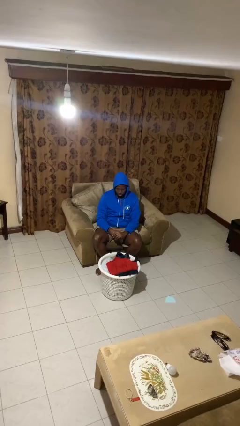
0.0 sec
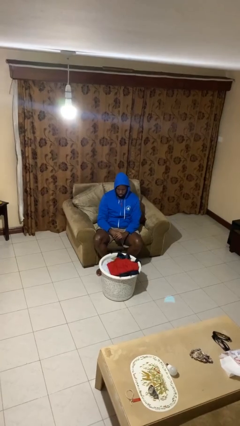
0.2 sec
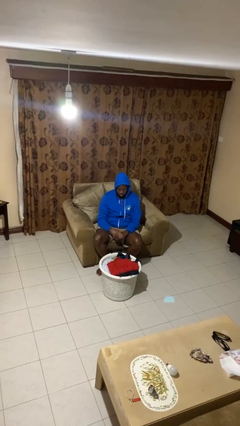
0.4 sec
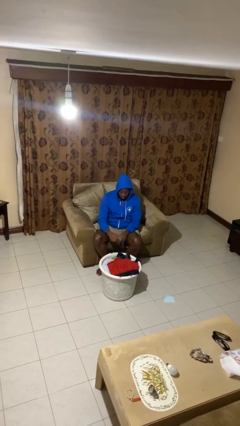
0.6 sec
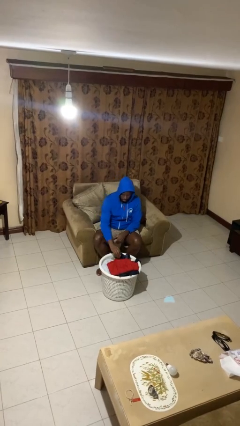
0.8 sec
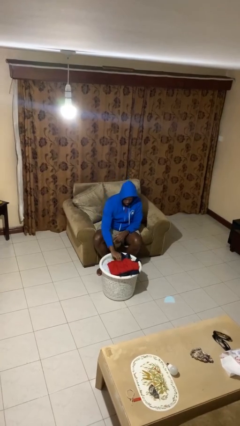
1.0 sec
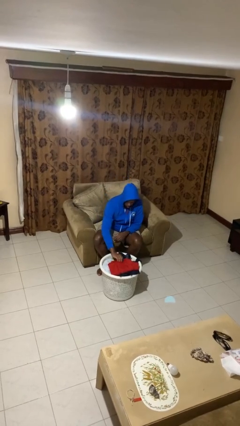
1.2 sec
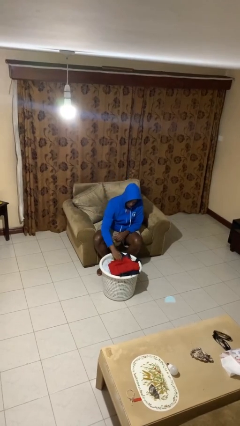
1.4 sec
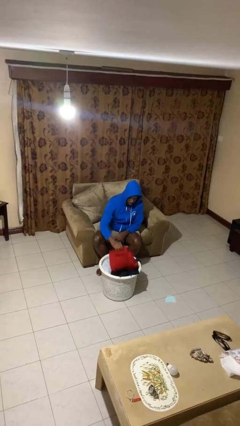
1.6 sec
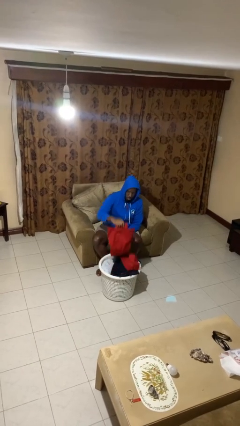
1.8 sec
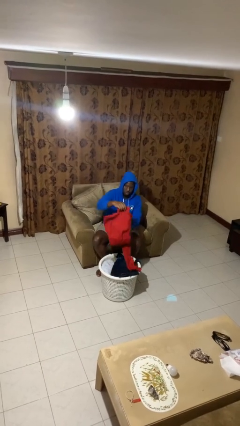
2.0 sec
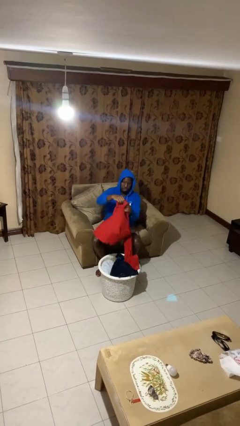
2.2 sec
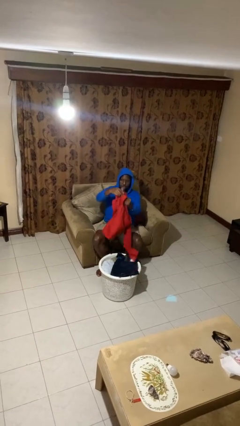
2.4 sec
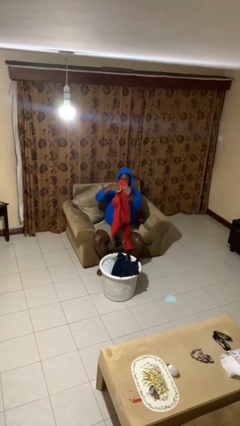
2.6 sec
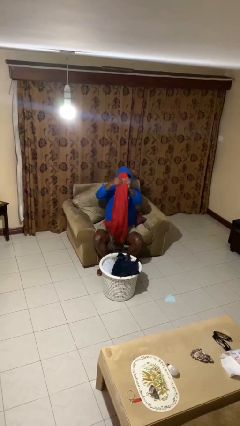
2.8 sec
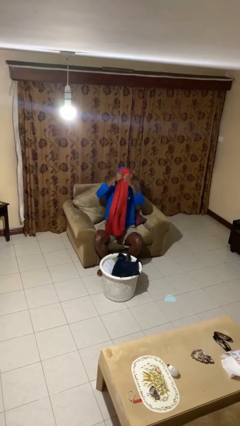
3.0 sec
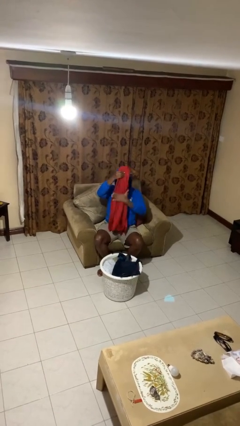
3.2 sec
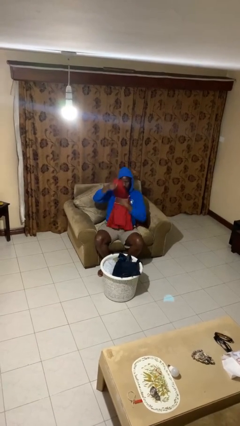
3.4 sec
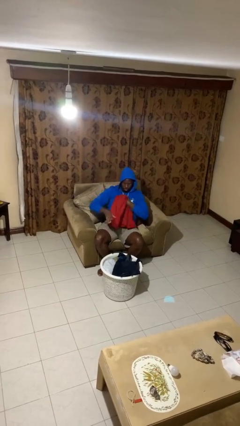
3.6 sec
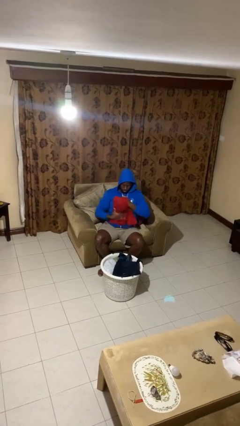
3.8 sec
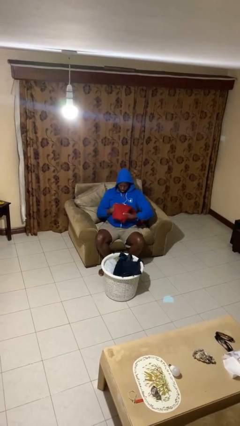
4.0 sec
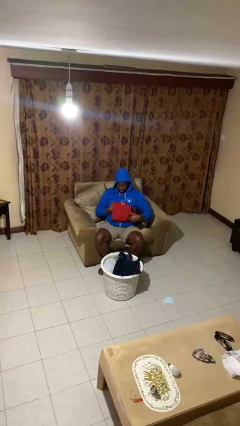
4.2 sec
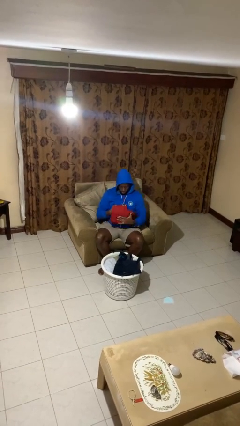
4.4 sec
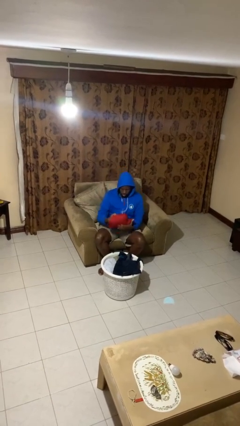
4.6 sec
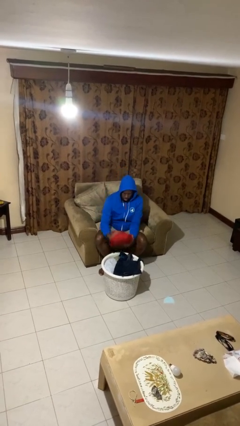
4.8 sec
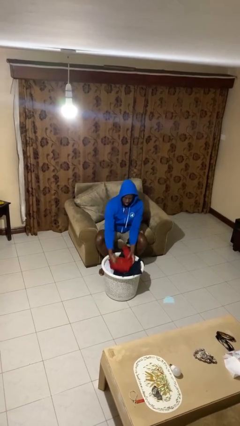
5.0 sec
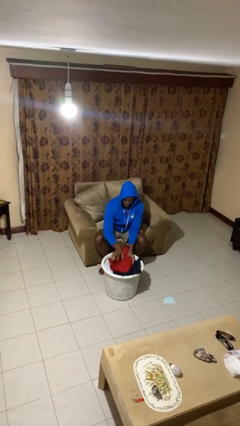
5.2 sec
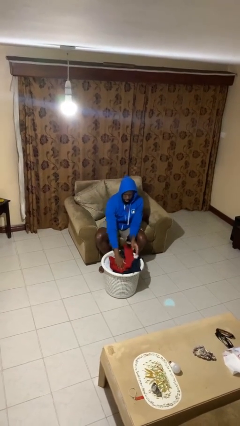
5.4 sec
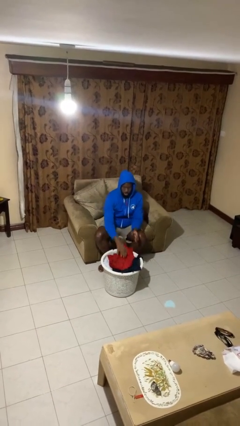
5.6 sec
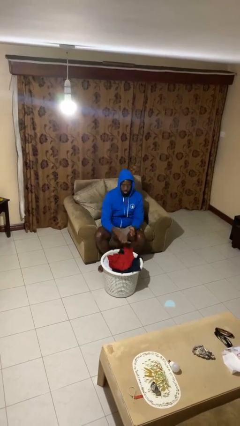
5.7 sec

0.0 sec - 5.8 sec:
person folds shirt

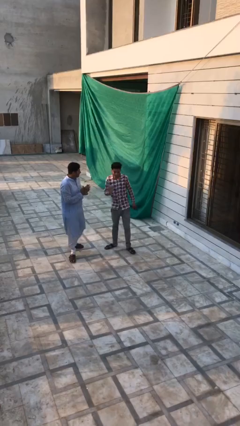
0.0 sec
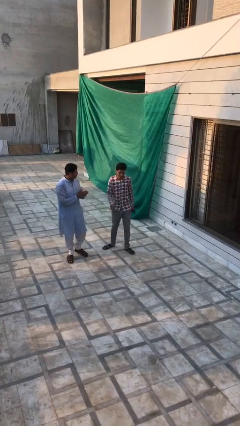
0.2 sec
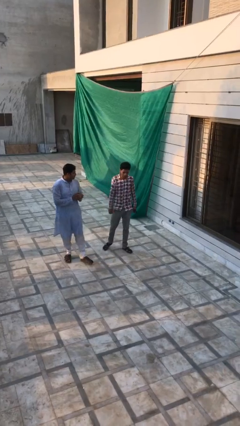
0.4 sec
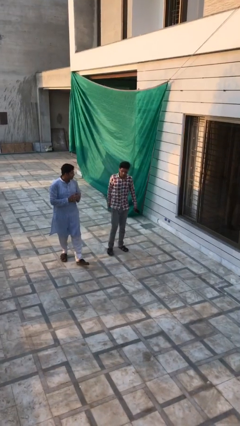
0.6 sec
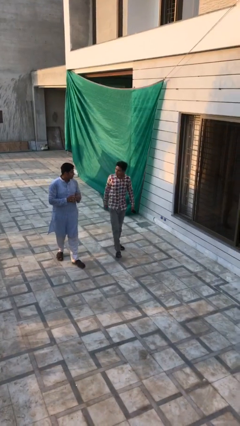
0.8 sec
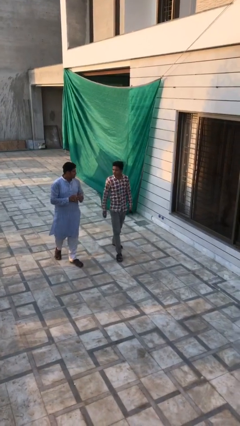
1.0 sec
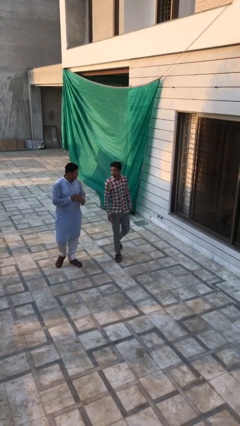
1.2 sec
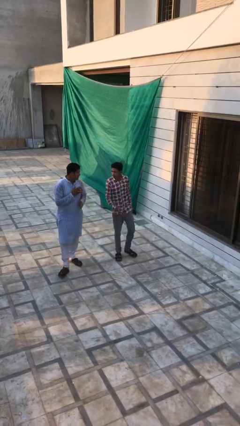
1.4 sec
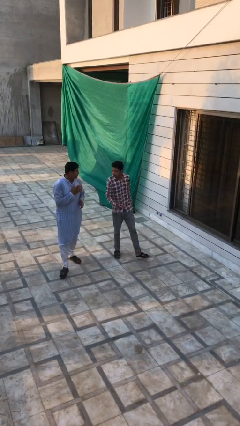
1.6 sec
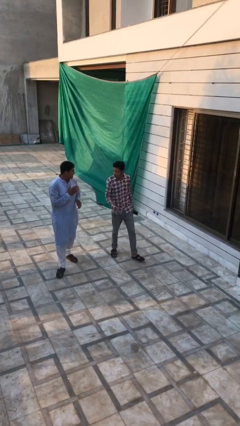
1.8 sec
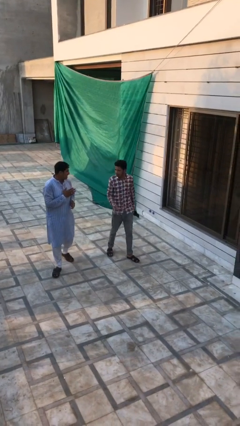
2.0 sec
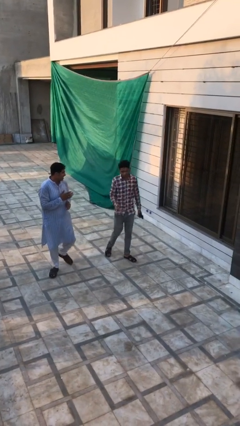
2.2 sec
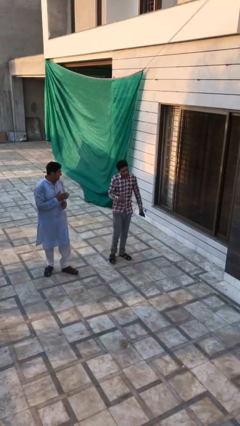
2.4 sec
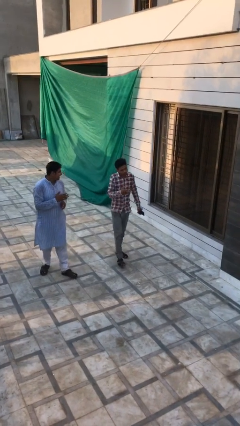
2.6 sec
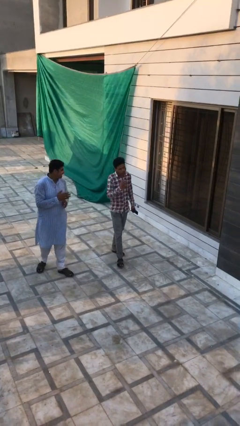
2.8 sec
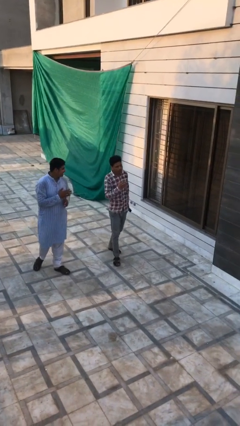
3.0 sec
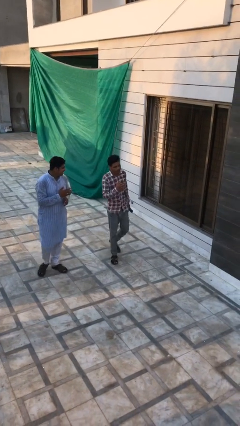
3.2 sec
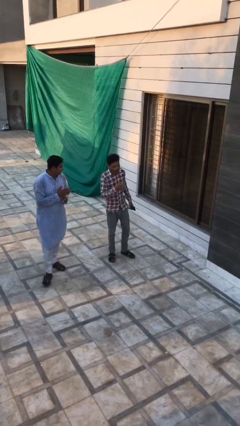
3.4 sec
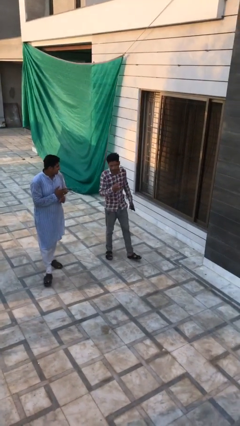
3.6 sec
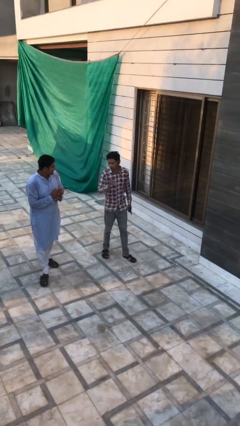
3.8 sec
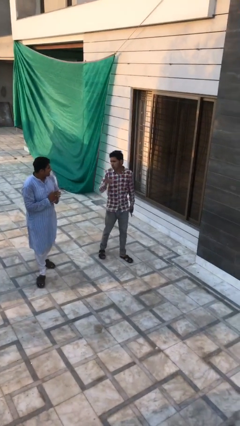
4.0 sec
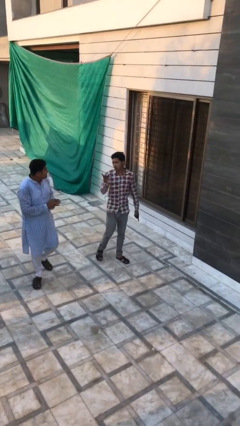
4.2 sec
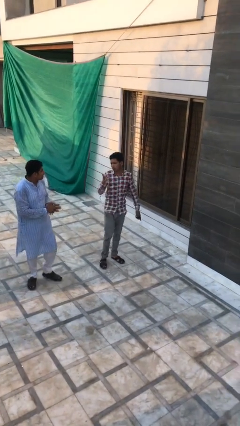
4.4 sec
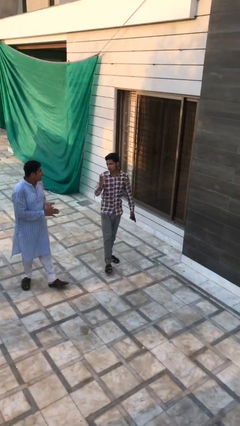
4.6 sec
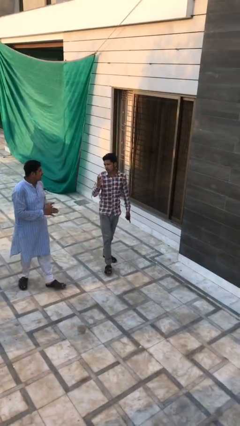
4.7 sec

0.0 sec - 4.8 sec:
person talks to person

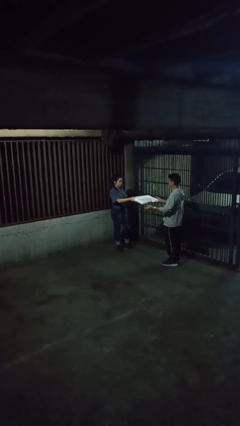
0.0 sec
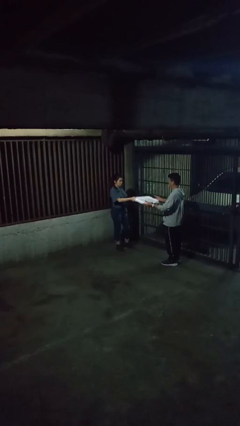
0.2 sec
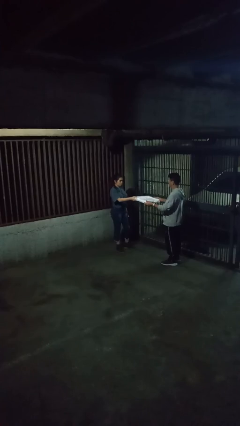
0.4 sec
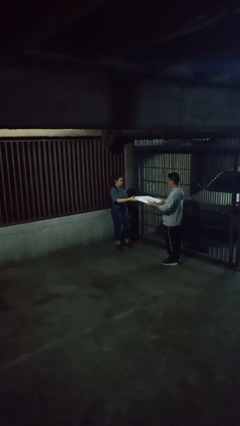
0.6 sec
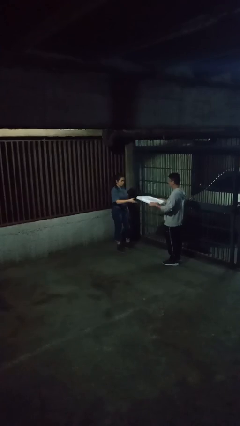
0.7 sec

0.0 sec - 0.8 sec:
person transfers object to person

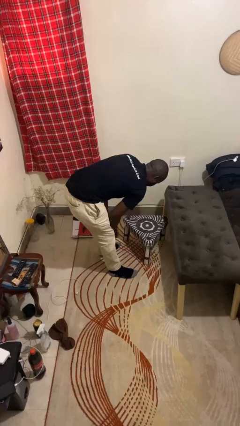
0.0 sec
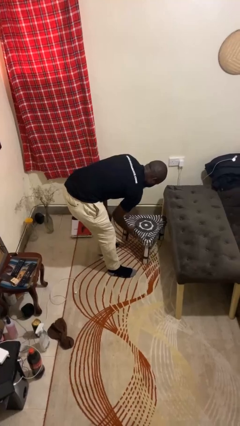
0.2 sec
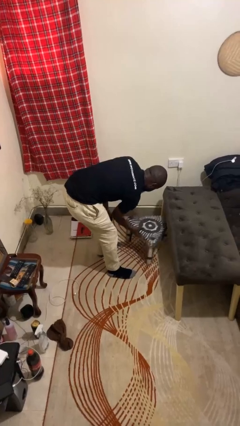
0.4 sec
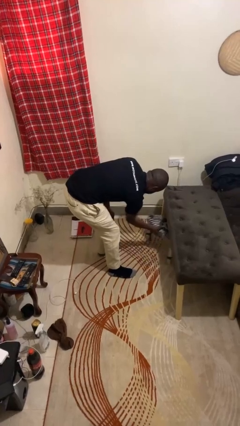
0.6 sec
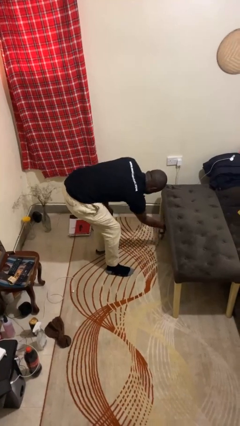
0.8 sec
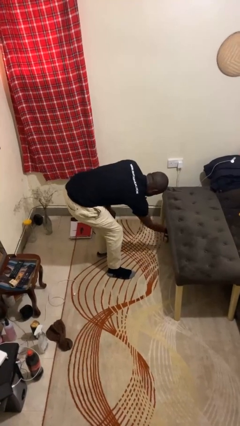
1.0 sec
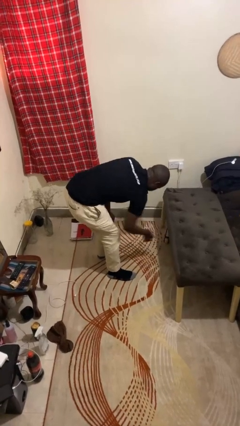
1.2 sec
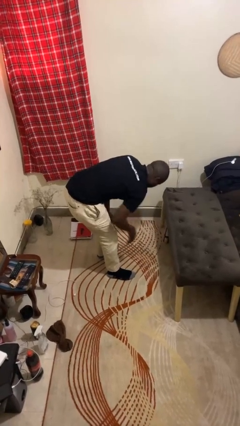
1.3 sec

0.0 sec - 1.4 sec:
person pushes in chair

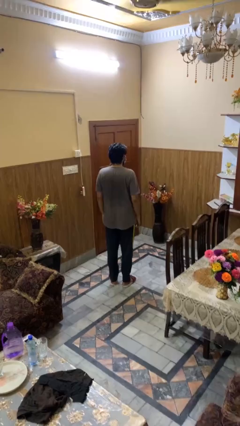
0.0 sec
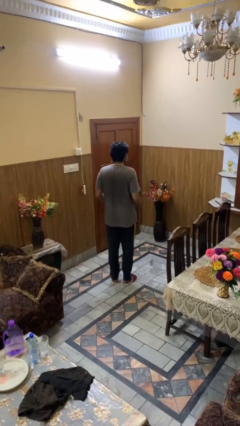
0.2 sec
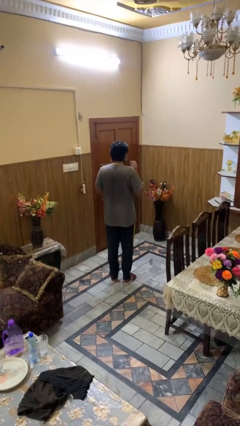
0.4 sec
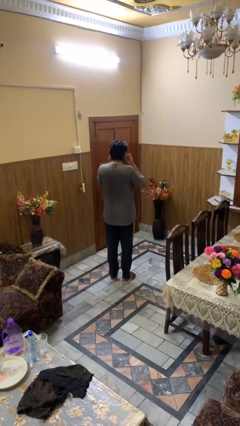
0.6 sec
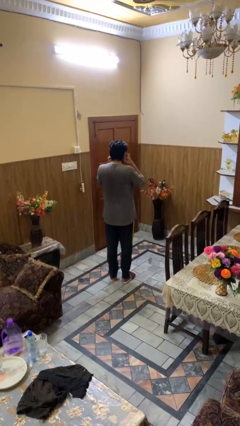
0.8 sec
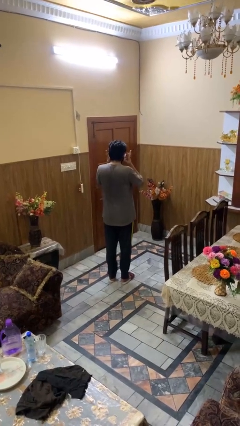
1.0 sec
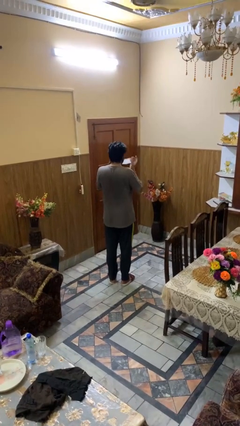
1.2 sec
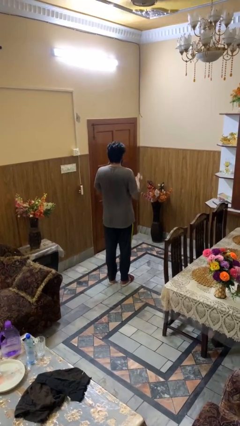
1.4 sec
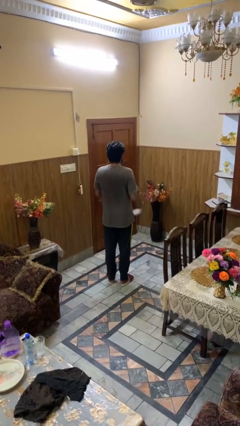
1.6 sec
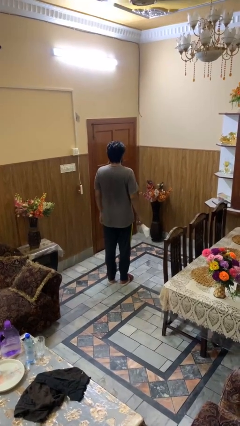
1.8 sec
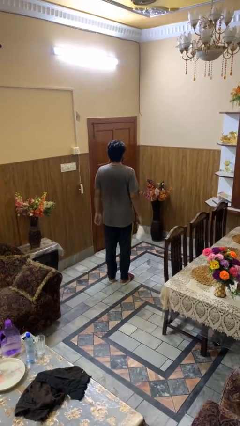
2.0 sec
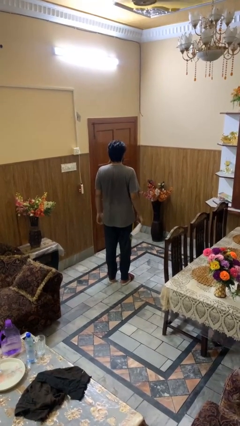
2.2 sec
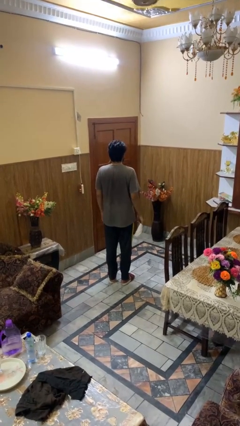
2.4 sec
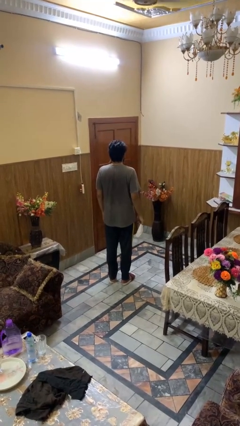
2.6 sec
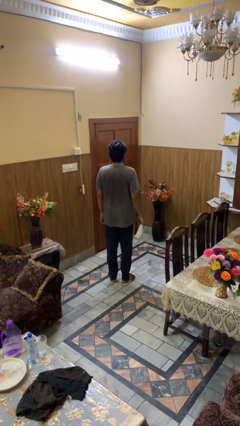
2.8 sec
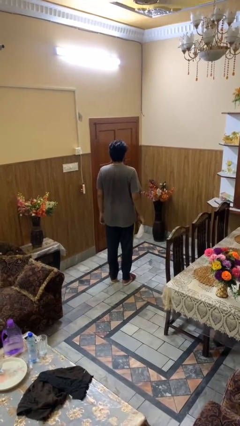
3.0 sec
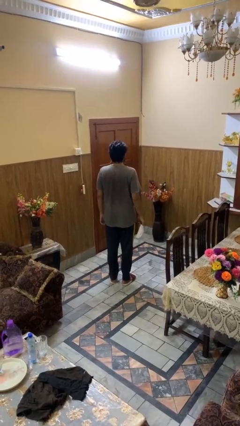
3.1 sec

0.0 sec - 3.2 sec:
person takes off facemask

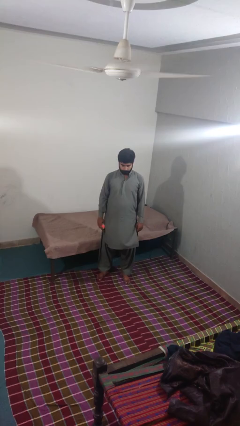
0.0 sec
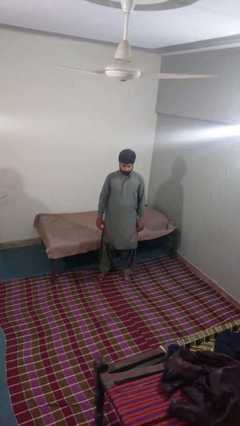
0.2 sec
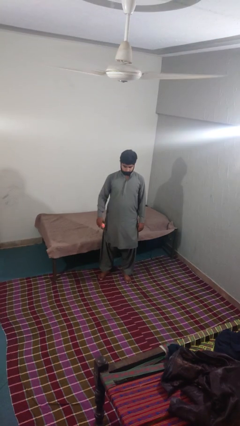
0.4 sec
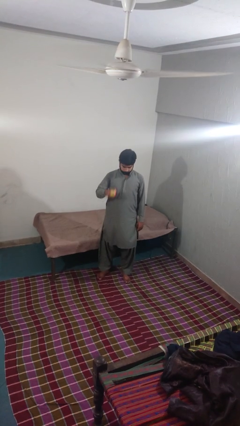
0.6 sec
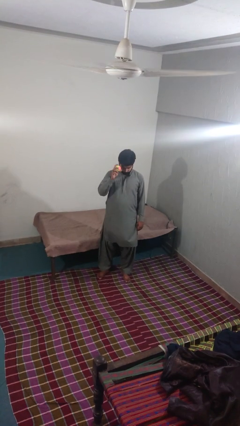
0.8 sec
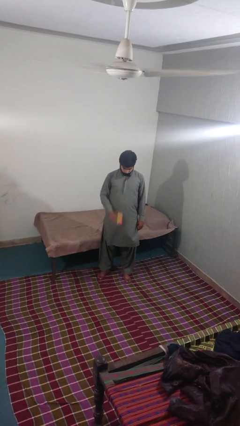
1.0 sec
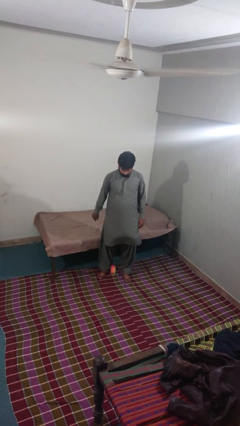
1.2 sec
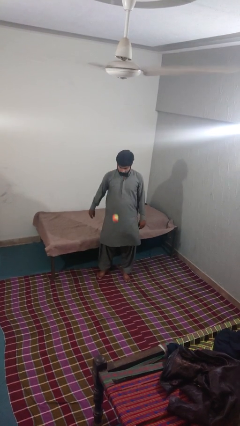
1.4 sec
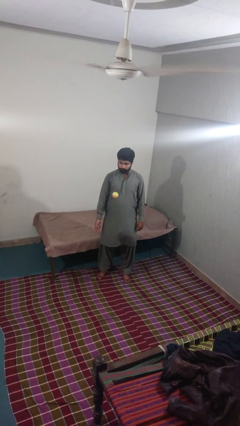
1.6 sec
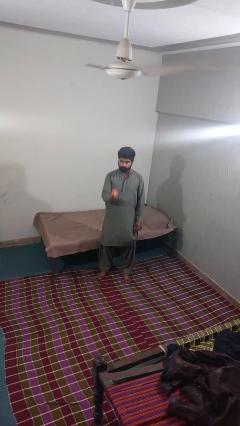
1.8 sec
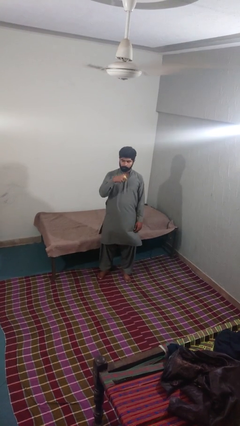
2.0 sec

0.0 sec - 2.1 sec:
person bounces ball on floor
